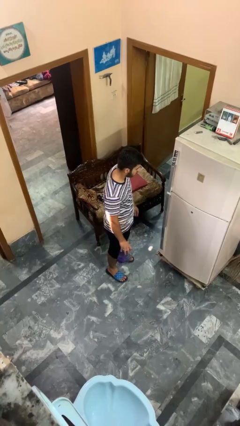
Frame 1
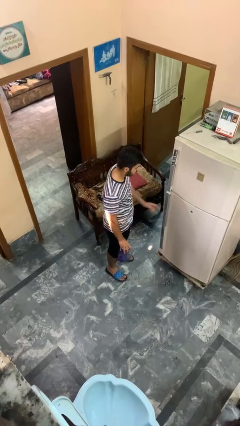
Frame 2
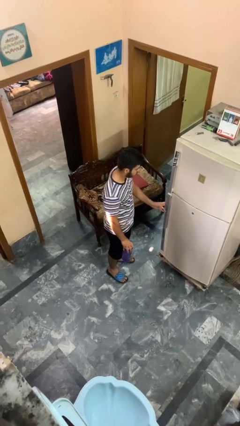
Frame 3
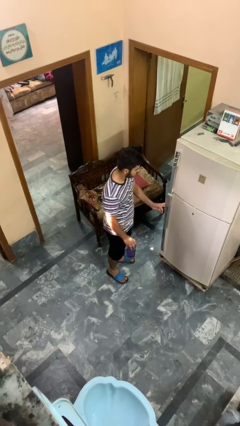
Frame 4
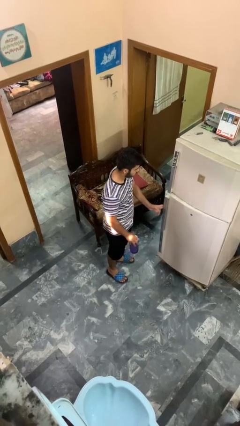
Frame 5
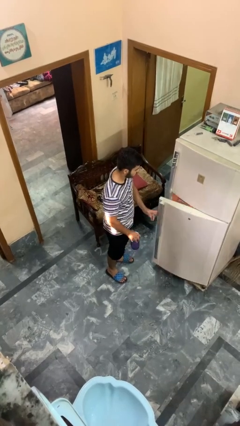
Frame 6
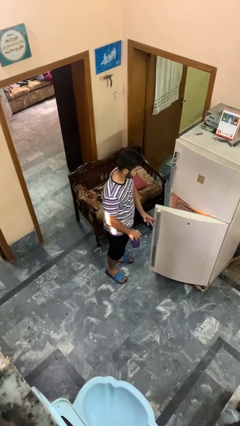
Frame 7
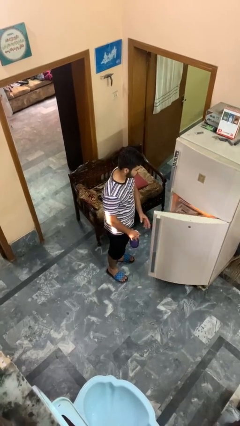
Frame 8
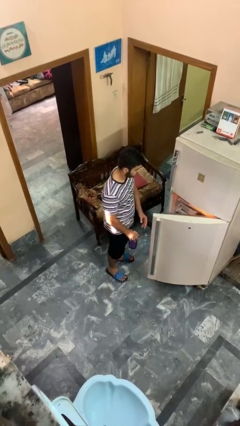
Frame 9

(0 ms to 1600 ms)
person opens refrigerator

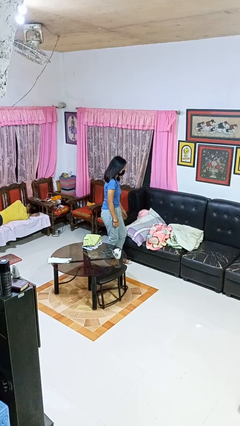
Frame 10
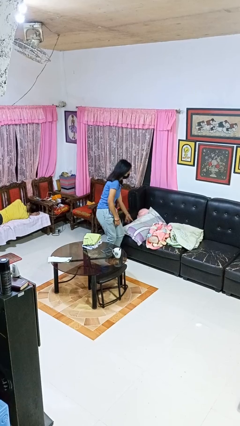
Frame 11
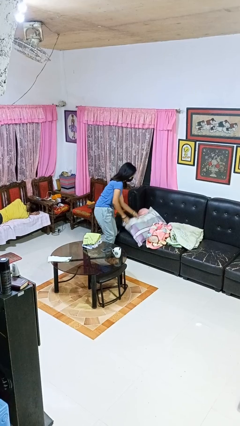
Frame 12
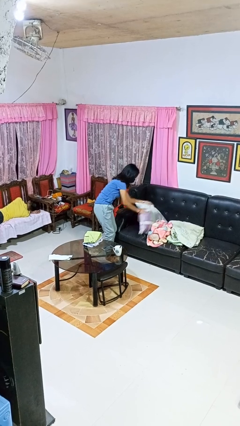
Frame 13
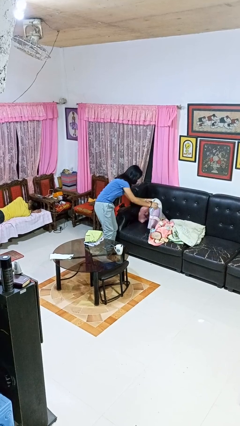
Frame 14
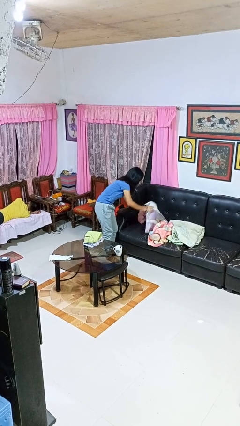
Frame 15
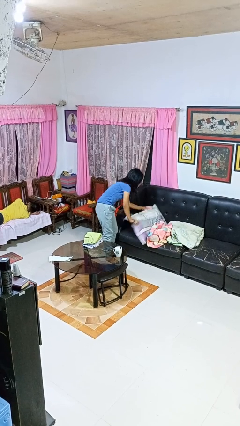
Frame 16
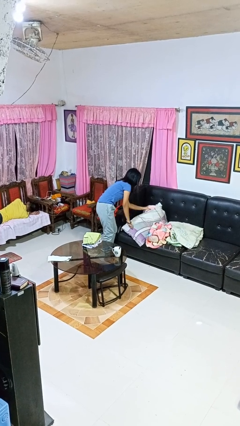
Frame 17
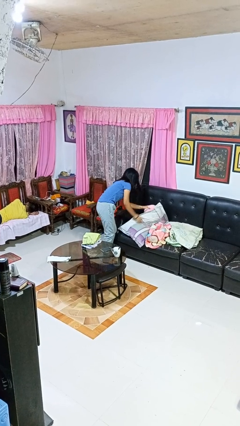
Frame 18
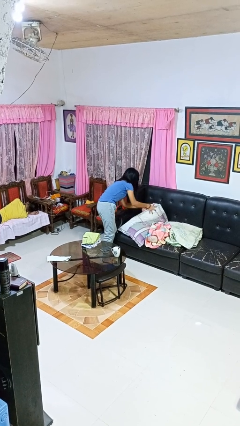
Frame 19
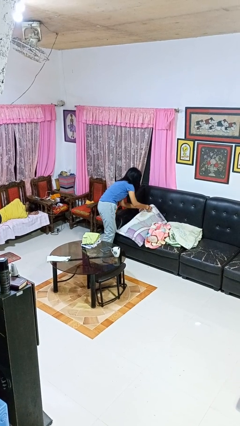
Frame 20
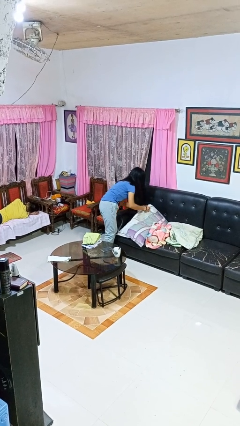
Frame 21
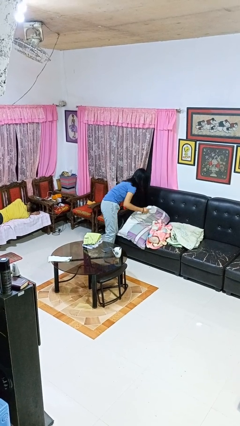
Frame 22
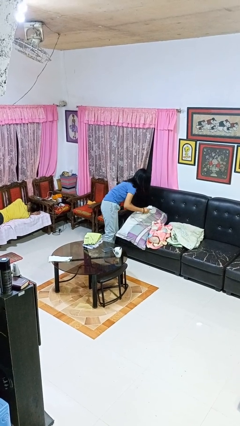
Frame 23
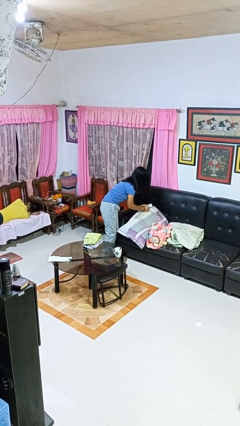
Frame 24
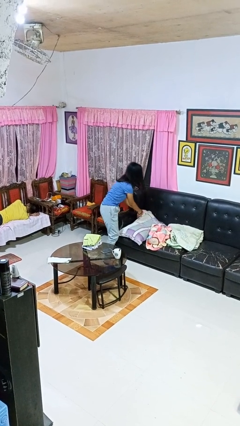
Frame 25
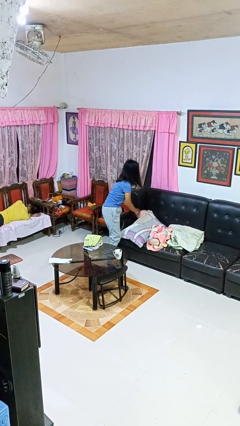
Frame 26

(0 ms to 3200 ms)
person searches in couch

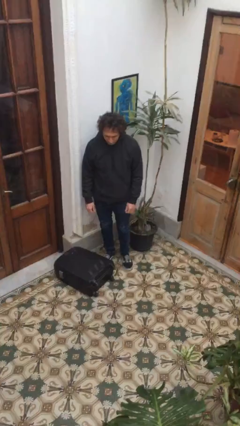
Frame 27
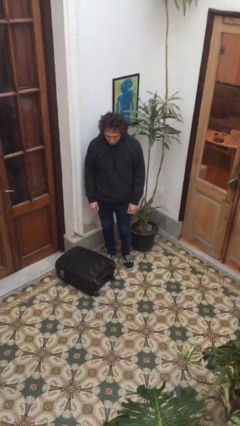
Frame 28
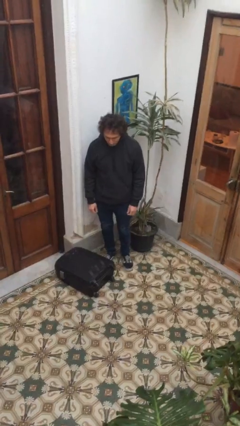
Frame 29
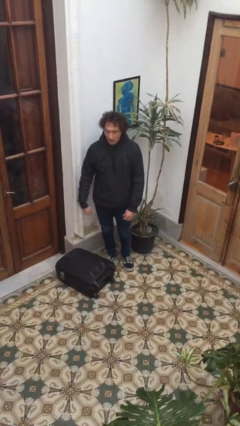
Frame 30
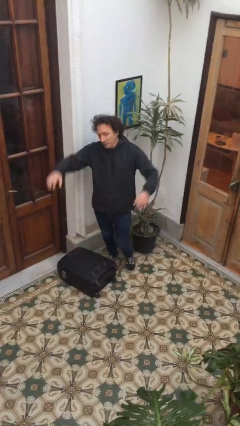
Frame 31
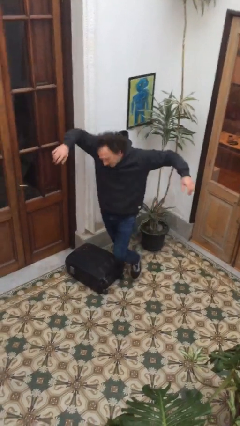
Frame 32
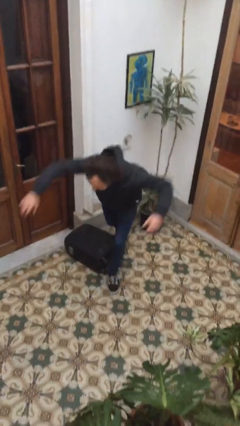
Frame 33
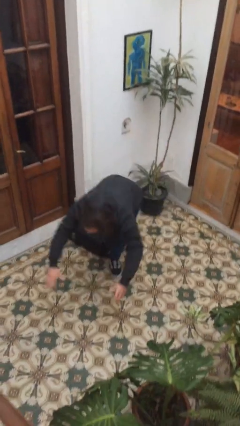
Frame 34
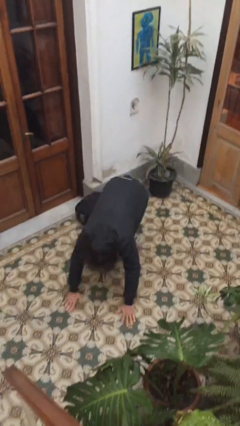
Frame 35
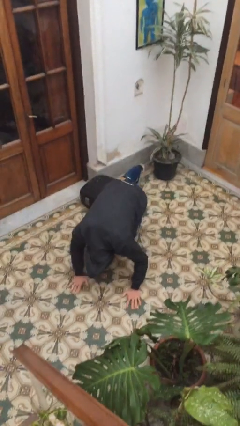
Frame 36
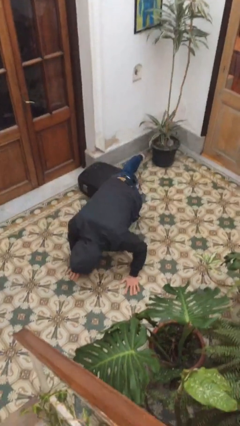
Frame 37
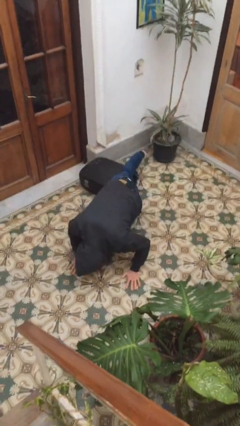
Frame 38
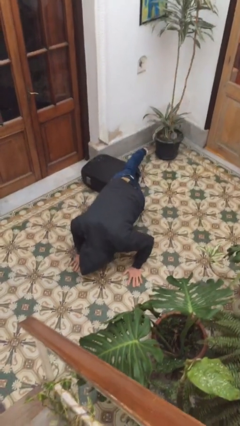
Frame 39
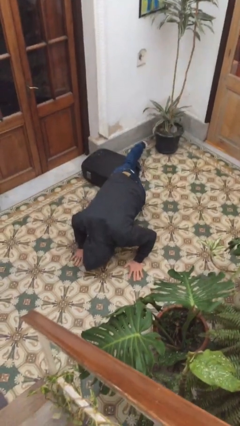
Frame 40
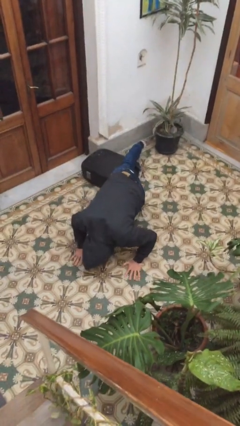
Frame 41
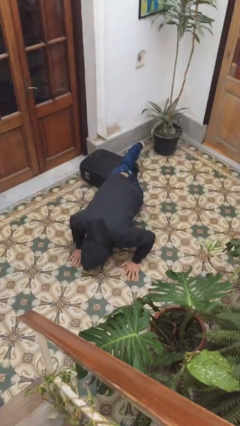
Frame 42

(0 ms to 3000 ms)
person trips on object on floor

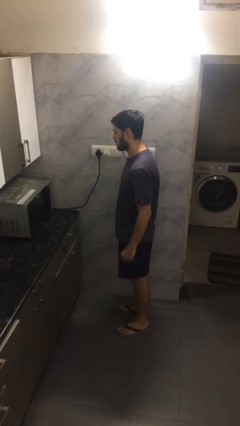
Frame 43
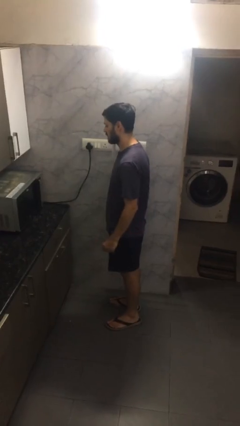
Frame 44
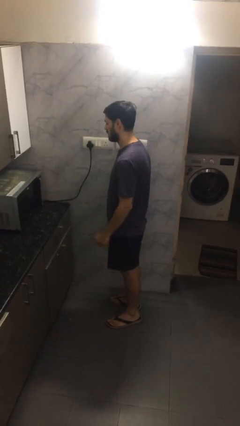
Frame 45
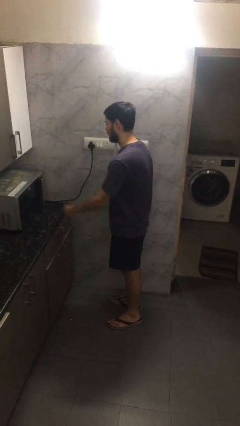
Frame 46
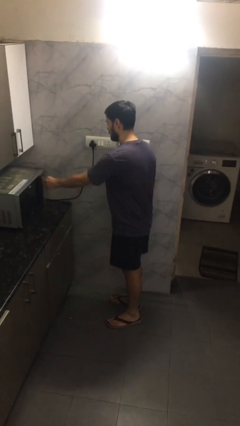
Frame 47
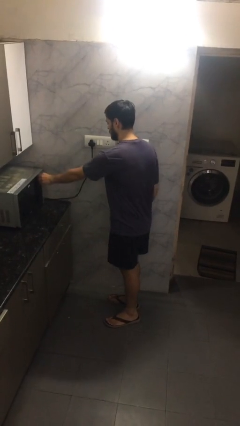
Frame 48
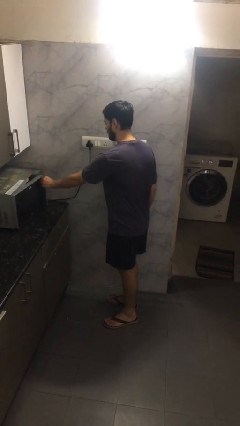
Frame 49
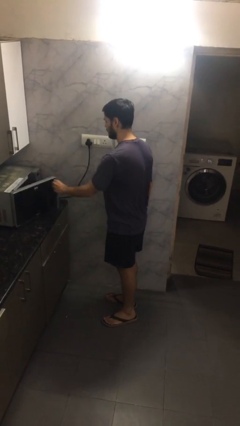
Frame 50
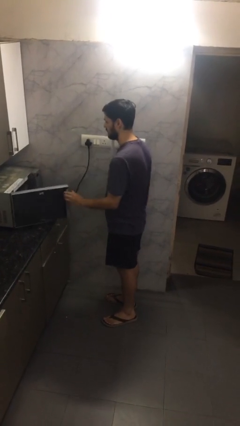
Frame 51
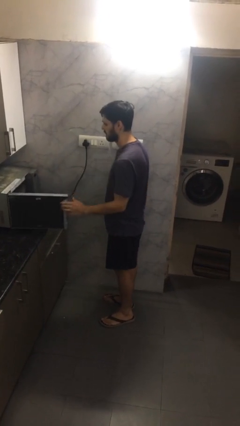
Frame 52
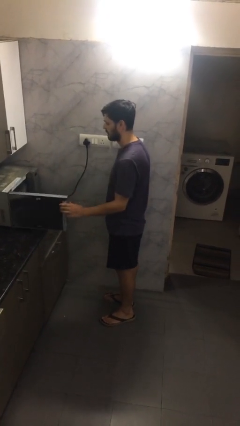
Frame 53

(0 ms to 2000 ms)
person opens microwave

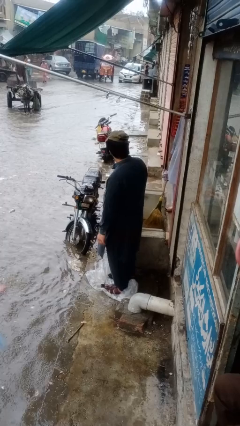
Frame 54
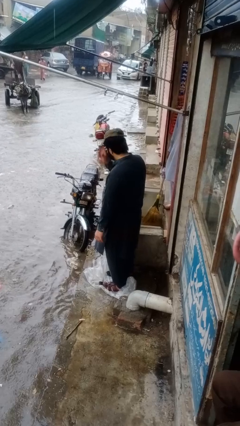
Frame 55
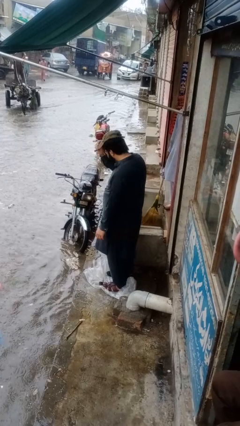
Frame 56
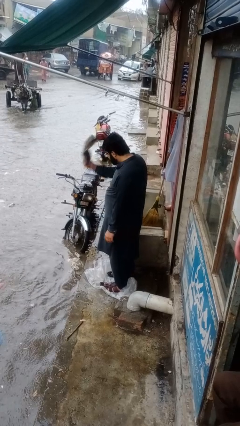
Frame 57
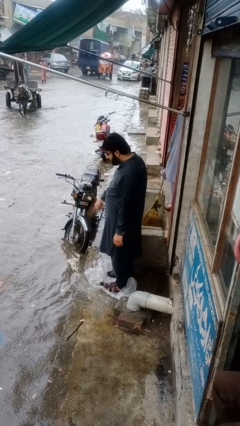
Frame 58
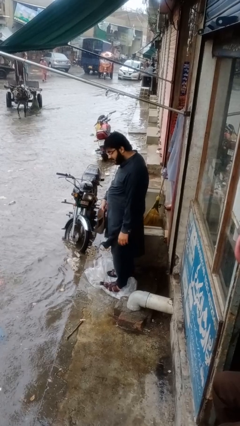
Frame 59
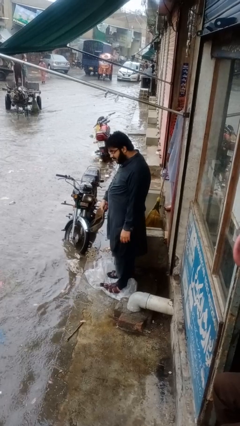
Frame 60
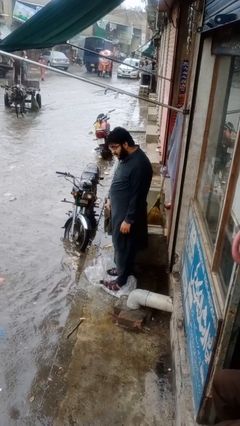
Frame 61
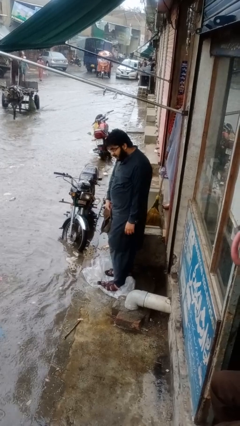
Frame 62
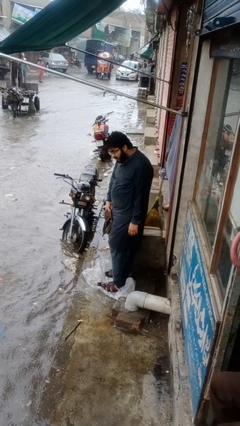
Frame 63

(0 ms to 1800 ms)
person takes off hat

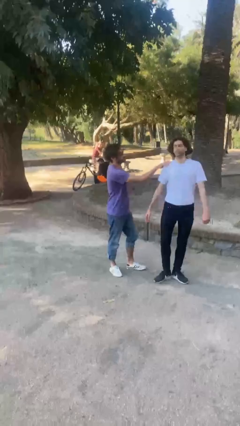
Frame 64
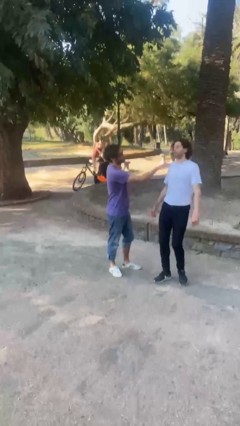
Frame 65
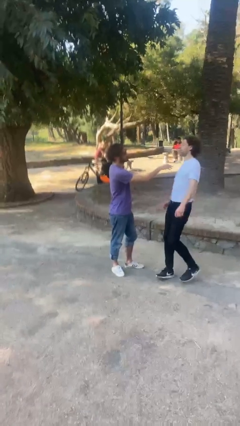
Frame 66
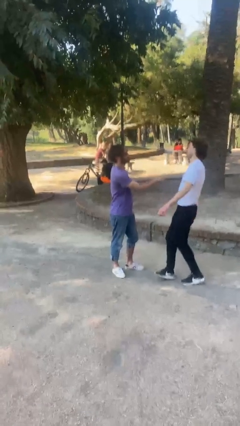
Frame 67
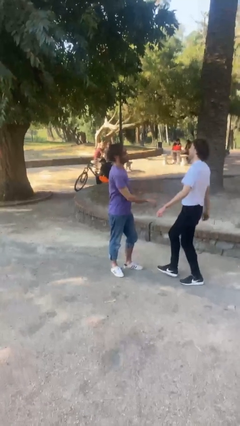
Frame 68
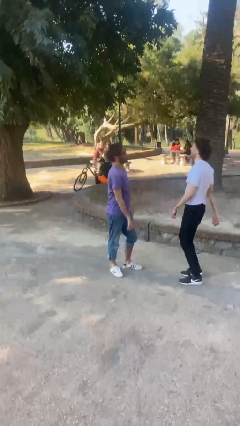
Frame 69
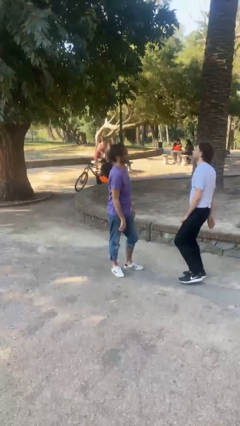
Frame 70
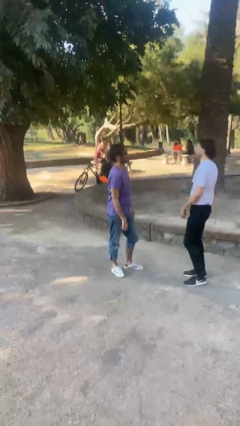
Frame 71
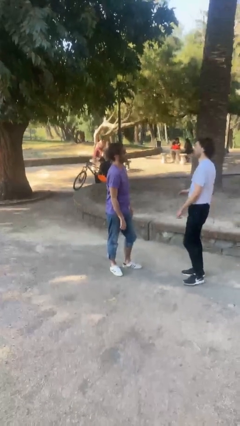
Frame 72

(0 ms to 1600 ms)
person spins person around

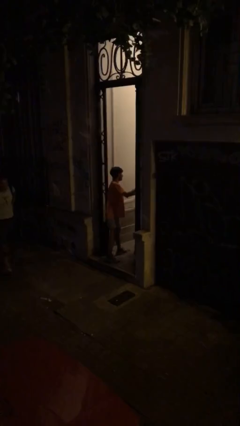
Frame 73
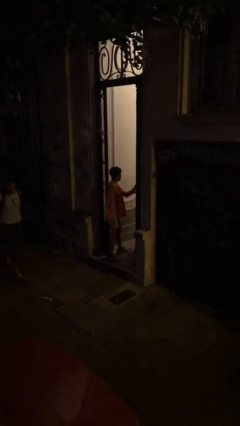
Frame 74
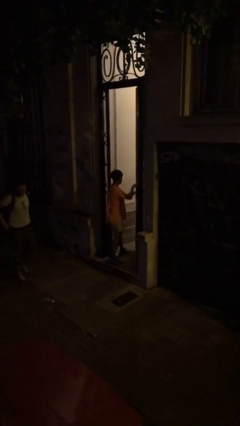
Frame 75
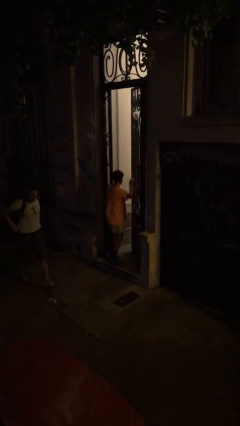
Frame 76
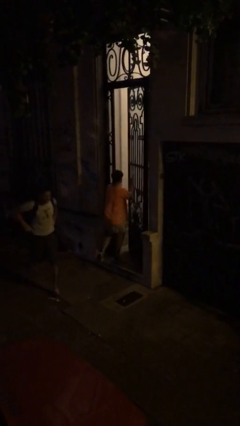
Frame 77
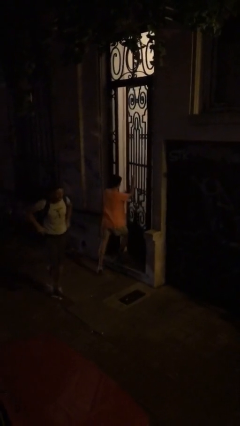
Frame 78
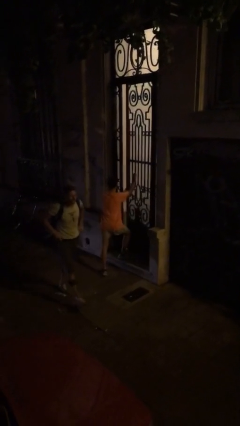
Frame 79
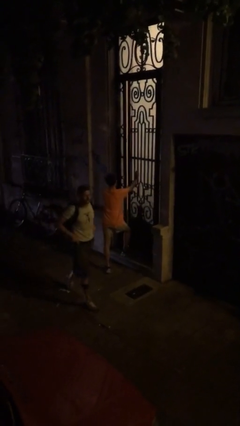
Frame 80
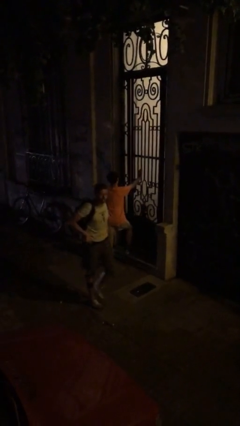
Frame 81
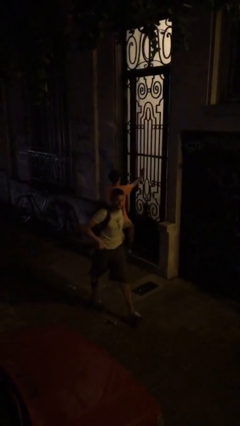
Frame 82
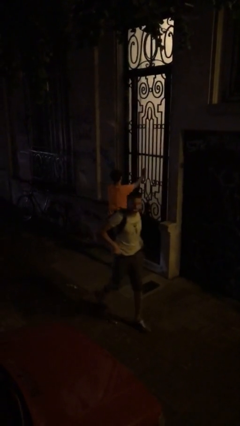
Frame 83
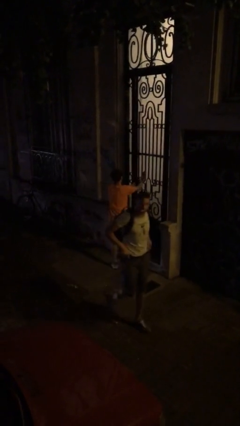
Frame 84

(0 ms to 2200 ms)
person closes facility door

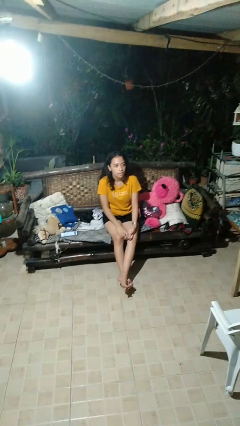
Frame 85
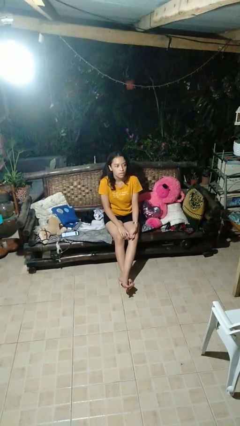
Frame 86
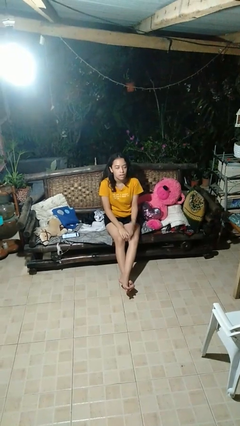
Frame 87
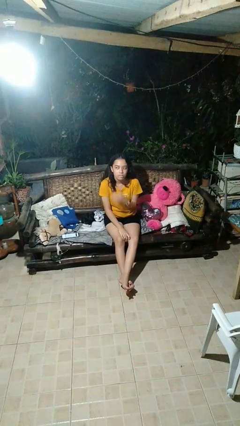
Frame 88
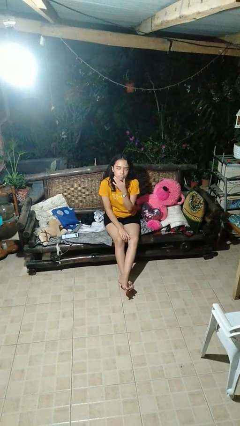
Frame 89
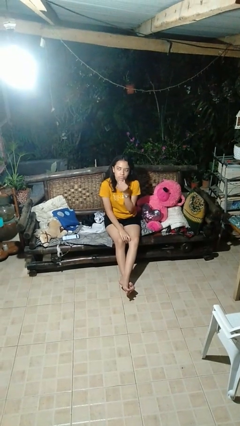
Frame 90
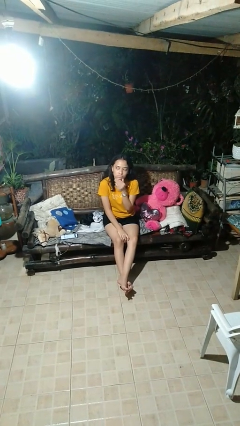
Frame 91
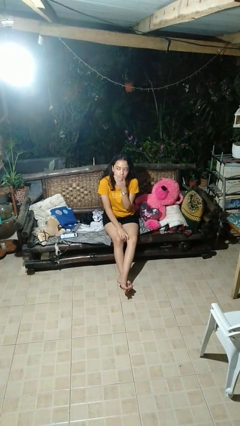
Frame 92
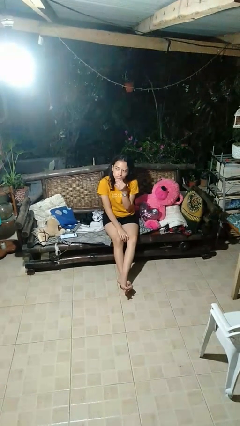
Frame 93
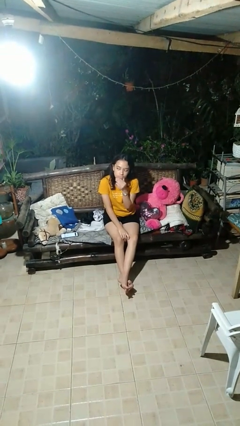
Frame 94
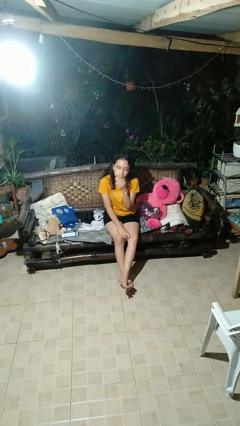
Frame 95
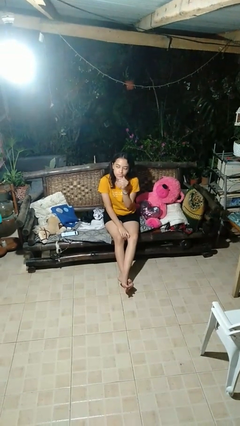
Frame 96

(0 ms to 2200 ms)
person strokes chin
